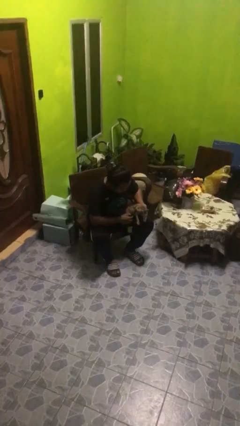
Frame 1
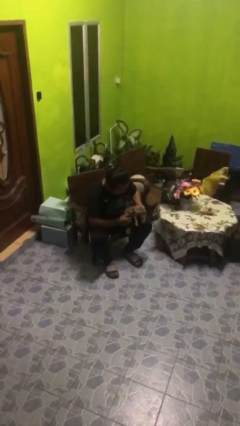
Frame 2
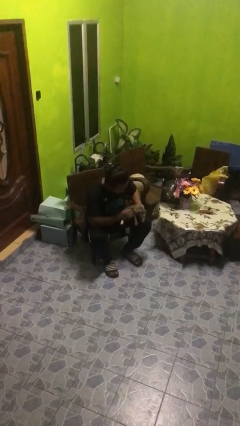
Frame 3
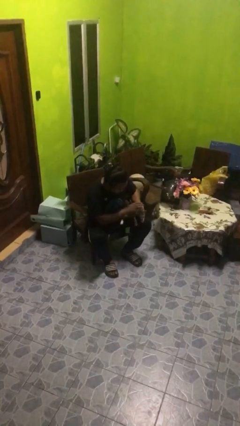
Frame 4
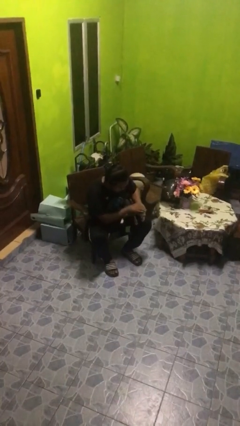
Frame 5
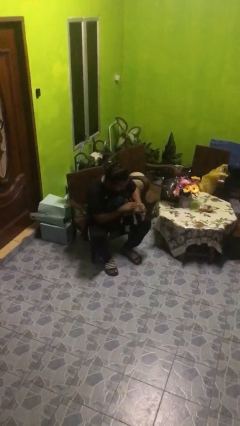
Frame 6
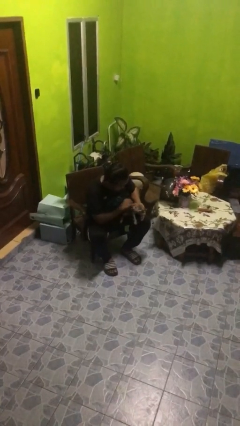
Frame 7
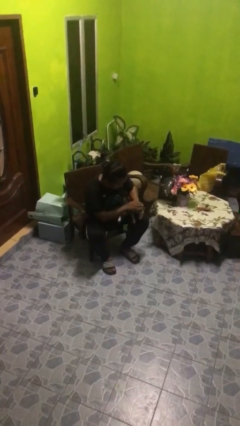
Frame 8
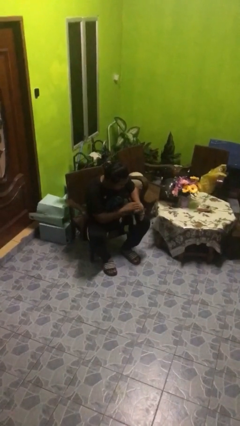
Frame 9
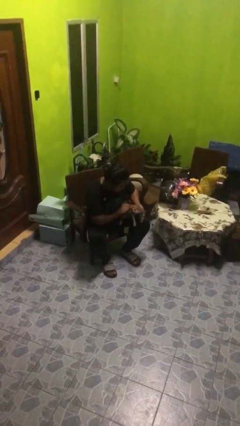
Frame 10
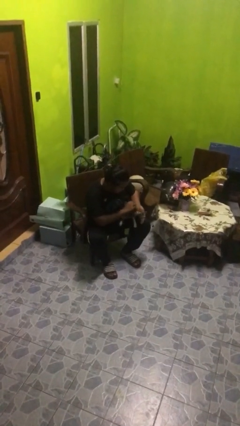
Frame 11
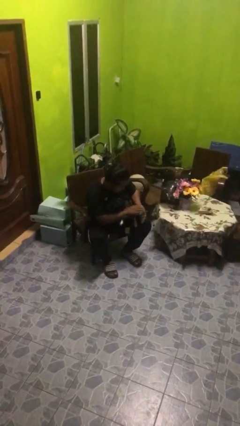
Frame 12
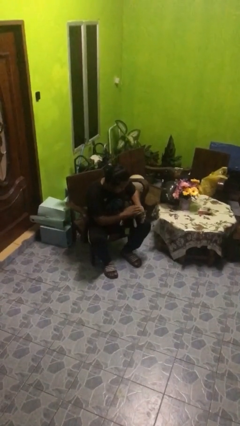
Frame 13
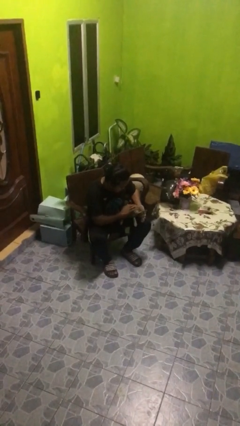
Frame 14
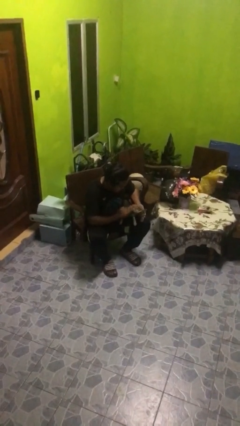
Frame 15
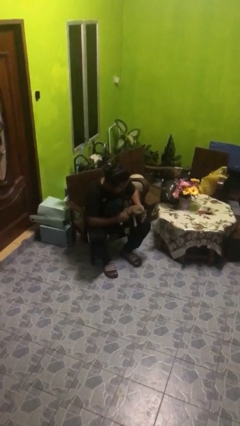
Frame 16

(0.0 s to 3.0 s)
person pets cat

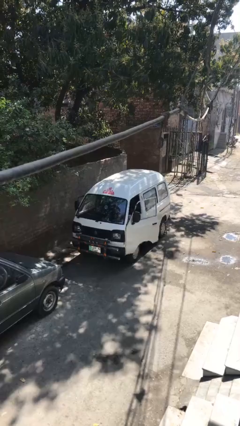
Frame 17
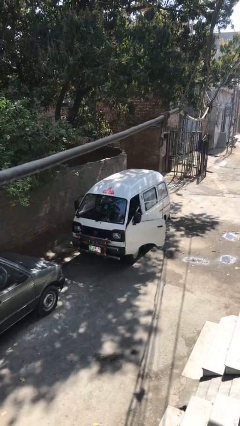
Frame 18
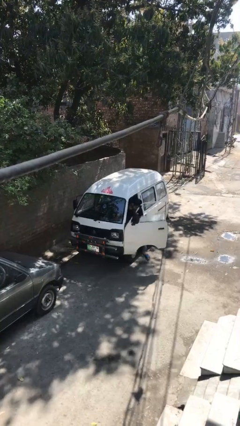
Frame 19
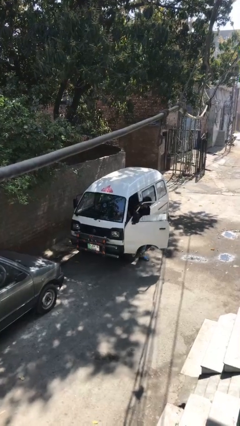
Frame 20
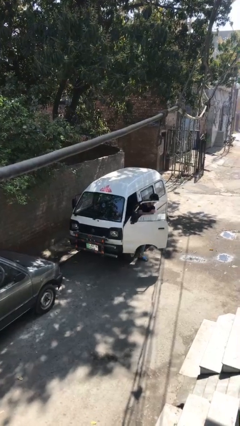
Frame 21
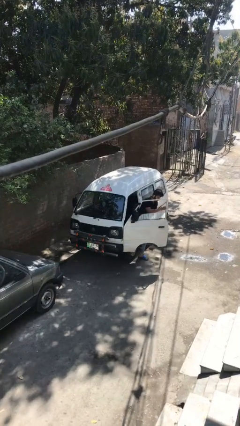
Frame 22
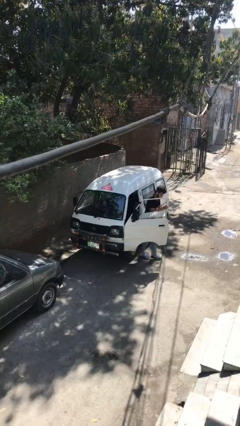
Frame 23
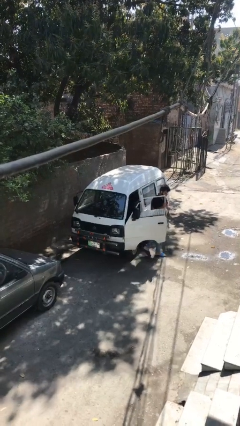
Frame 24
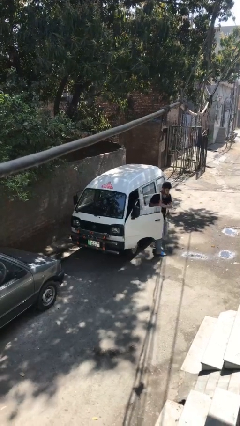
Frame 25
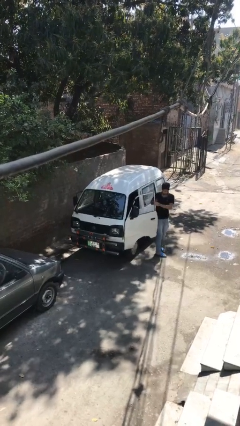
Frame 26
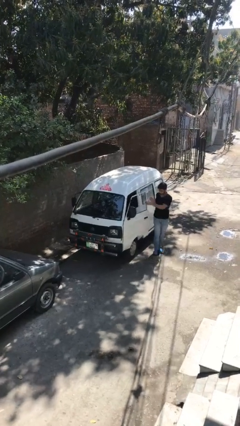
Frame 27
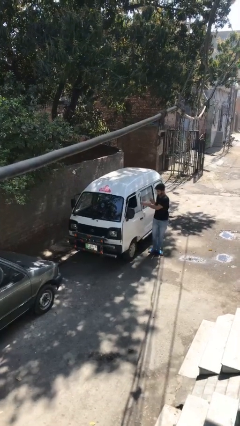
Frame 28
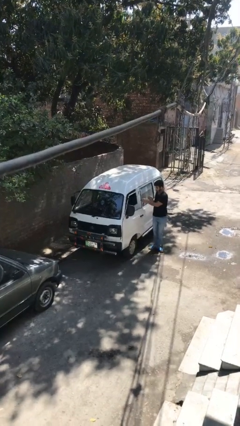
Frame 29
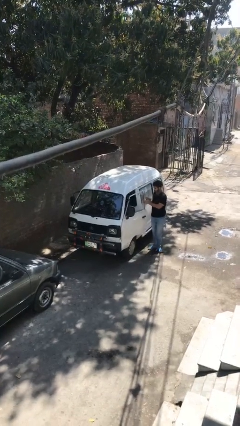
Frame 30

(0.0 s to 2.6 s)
car drops off person

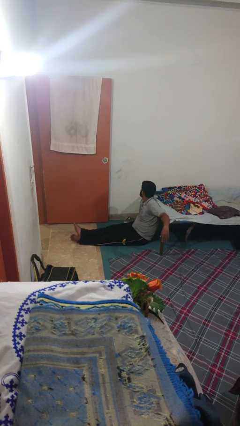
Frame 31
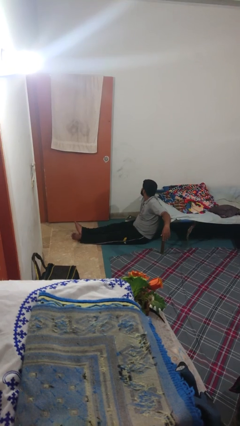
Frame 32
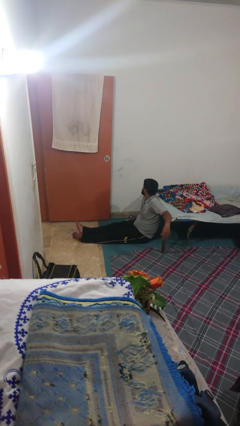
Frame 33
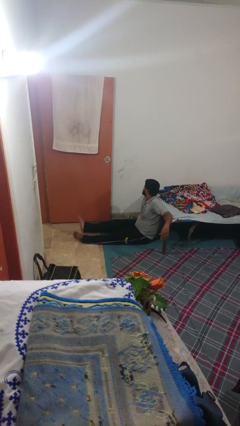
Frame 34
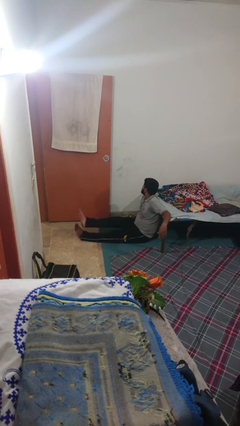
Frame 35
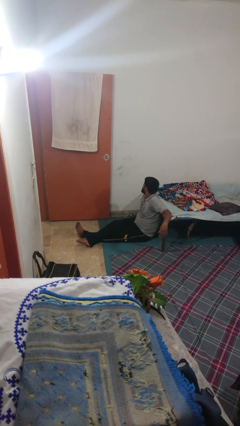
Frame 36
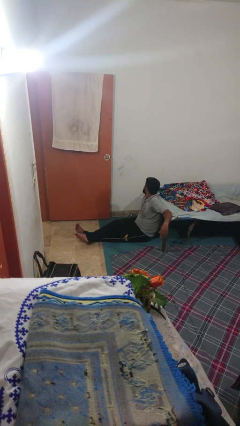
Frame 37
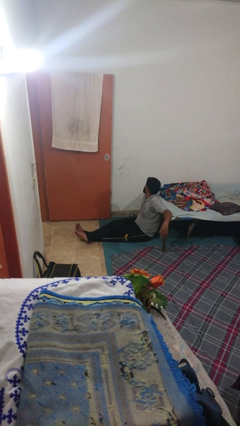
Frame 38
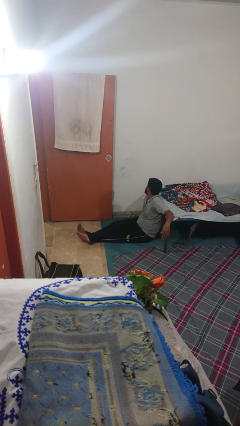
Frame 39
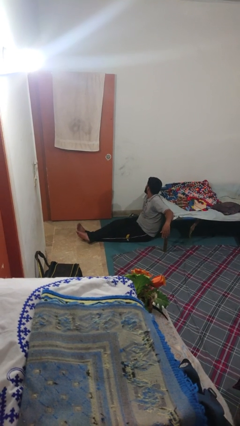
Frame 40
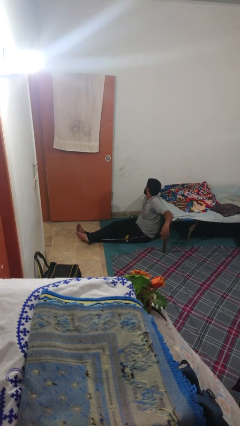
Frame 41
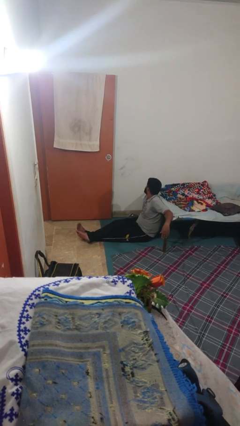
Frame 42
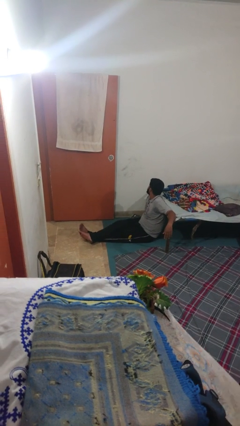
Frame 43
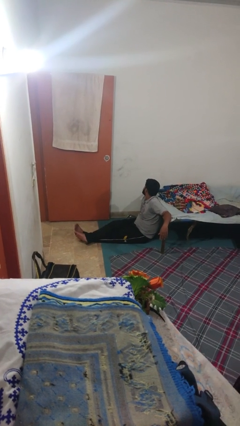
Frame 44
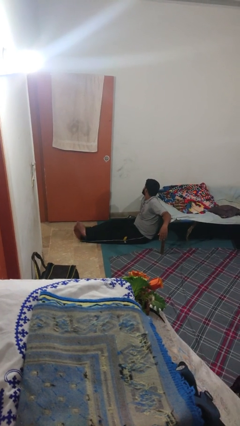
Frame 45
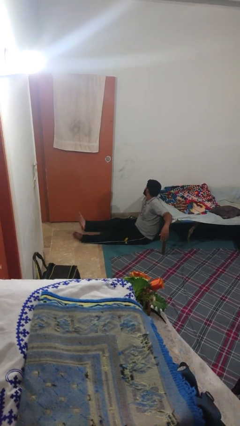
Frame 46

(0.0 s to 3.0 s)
person crosses legs

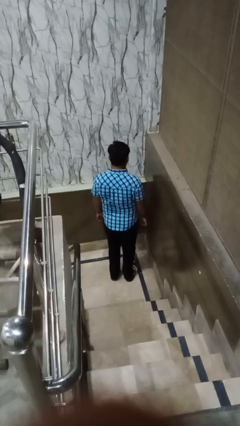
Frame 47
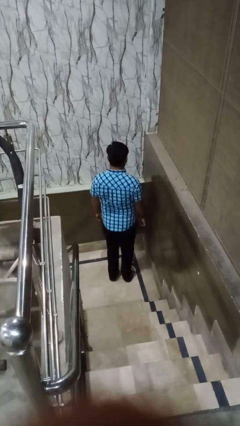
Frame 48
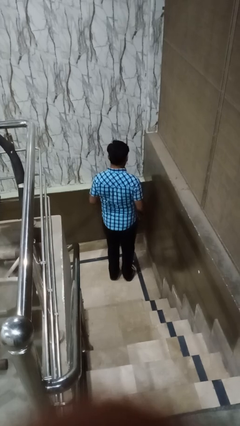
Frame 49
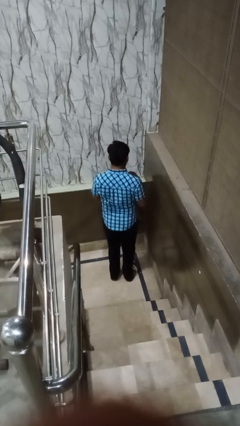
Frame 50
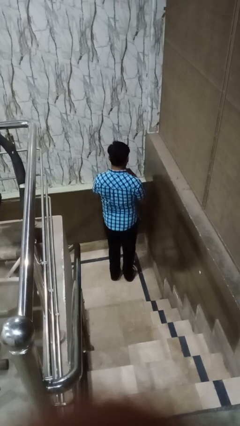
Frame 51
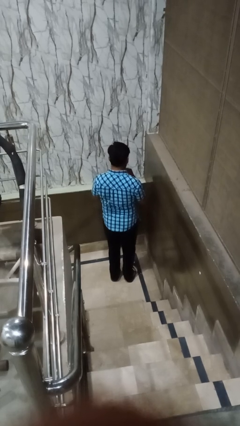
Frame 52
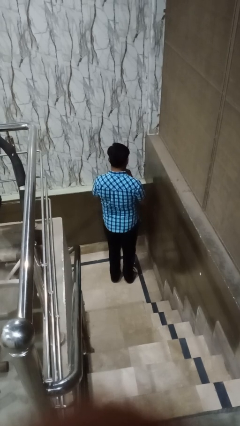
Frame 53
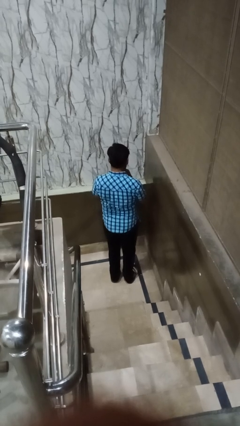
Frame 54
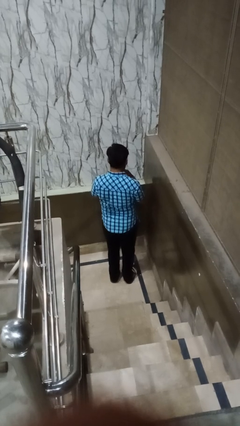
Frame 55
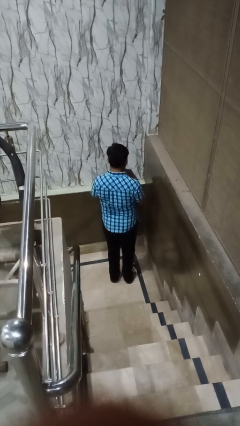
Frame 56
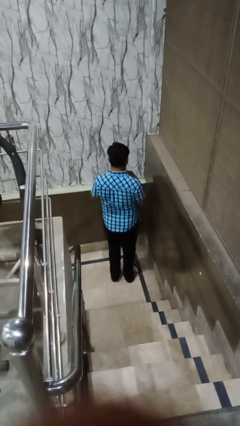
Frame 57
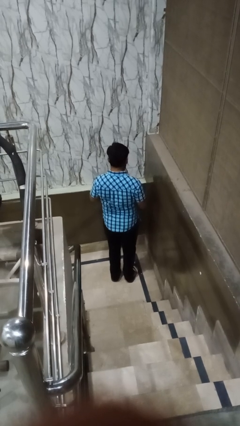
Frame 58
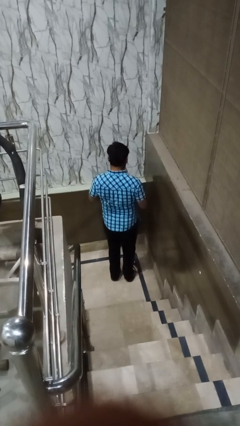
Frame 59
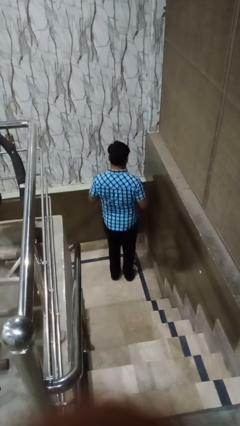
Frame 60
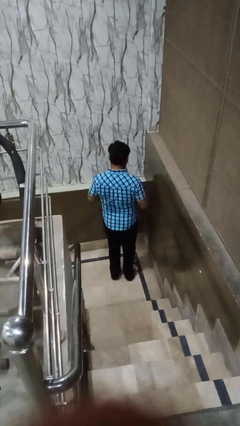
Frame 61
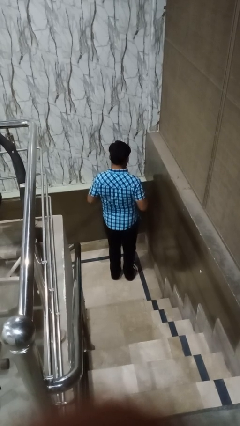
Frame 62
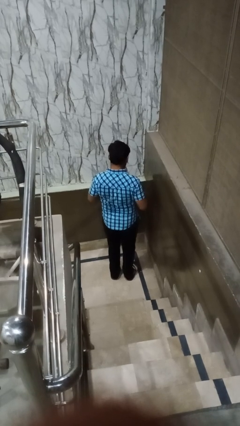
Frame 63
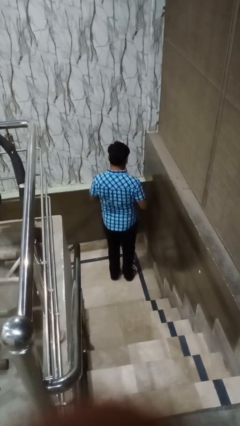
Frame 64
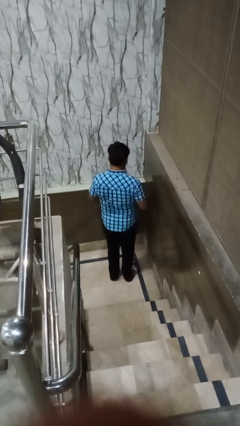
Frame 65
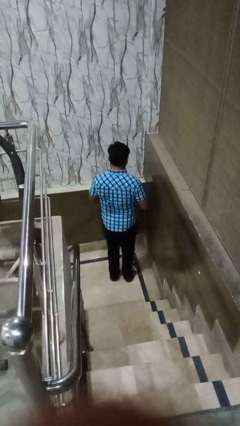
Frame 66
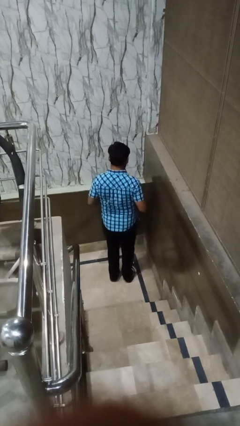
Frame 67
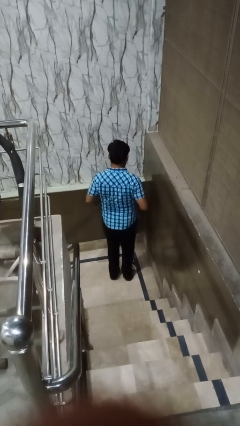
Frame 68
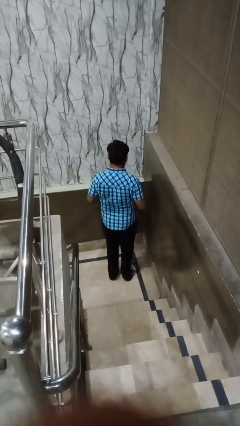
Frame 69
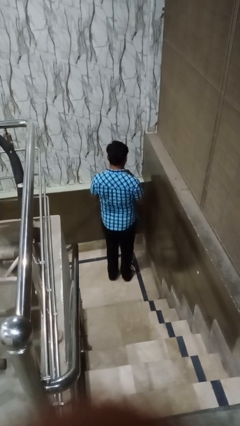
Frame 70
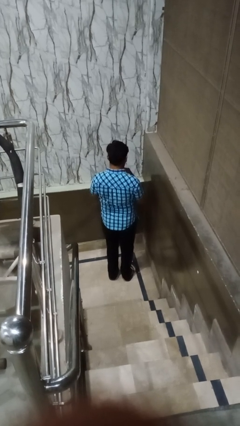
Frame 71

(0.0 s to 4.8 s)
person unbuttons shirt

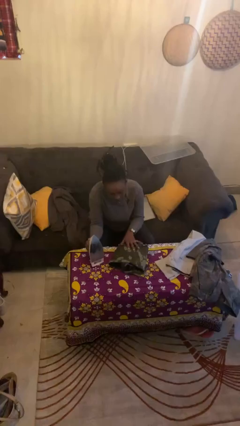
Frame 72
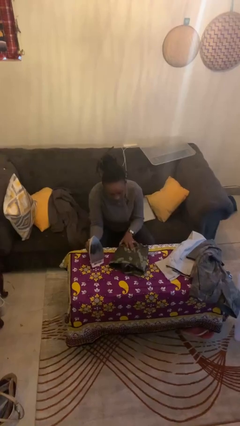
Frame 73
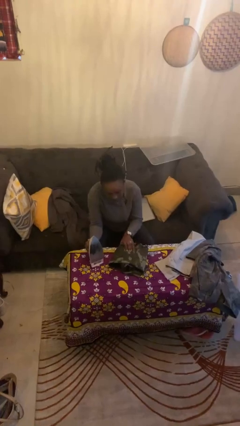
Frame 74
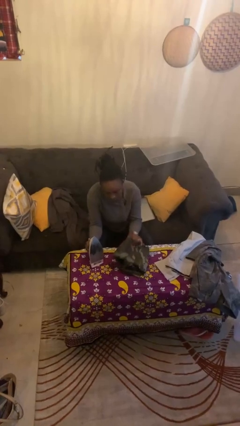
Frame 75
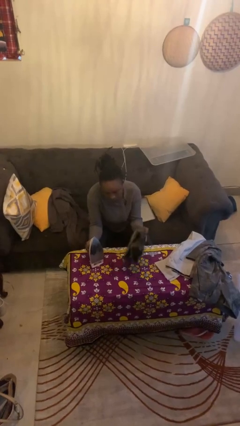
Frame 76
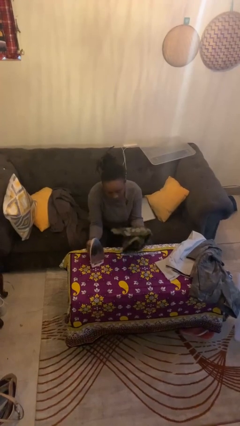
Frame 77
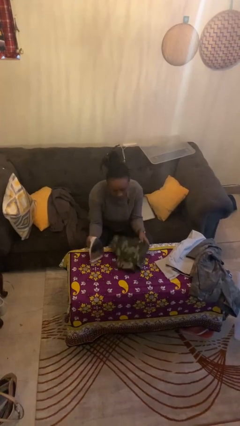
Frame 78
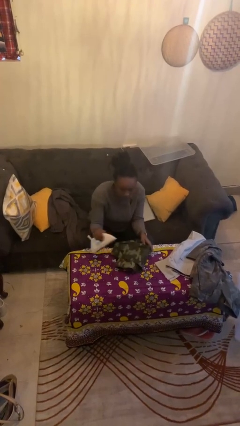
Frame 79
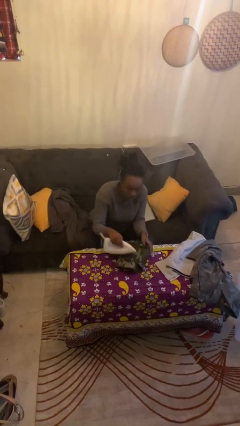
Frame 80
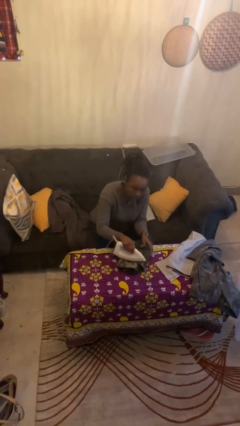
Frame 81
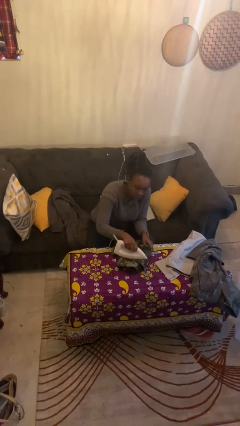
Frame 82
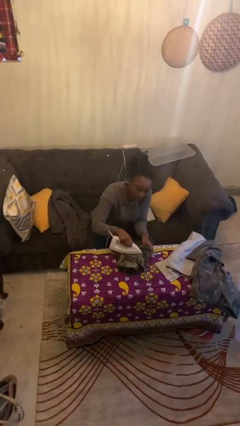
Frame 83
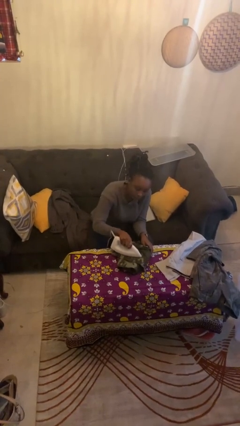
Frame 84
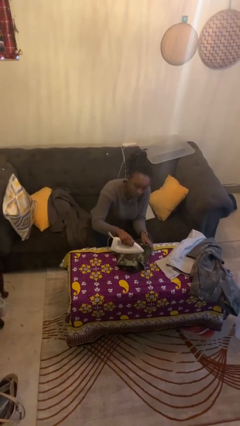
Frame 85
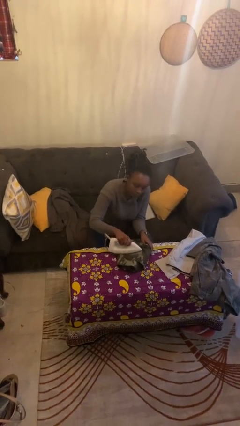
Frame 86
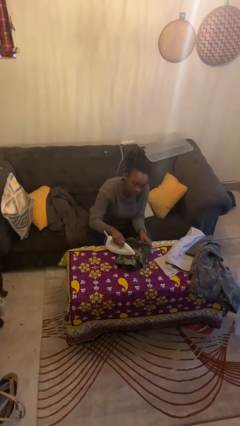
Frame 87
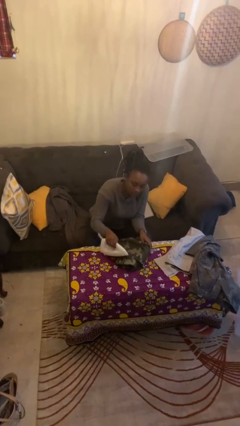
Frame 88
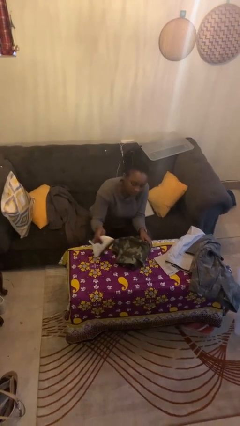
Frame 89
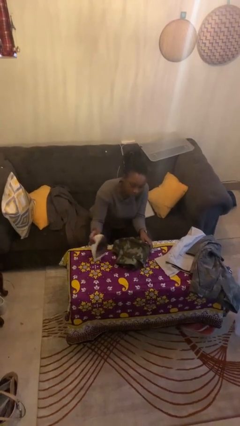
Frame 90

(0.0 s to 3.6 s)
person irons clothes
